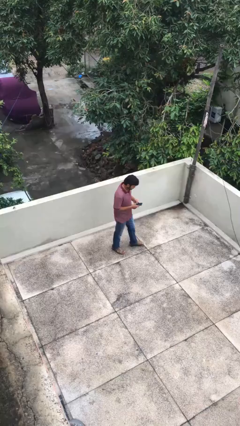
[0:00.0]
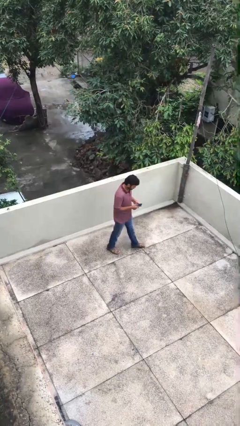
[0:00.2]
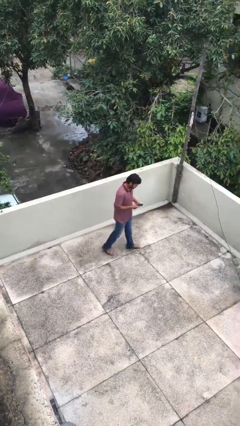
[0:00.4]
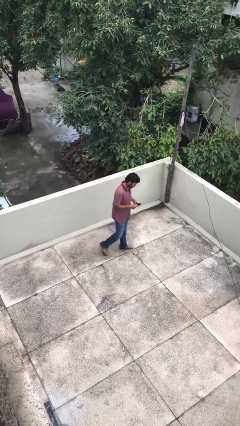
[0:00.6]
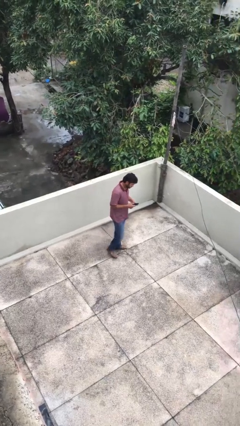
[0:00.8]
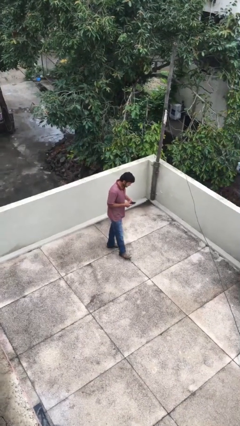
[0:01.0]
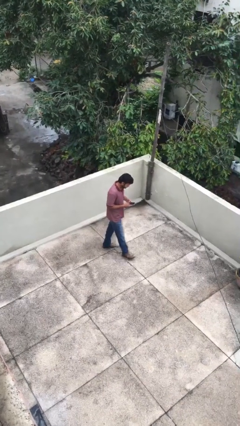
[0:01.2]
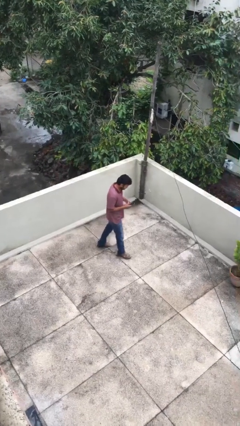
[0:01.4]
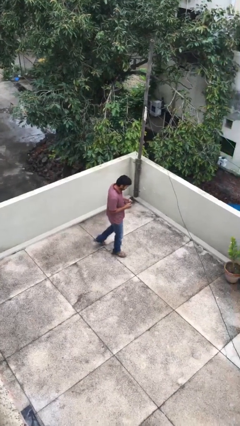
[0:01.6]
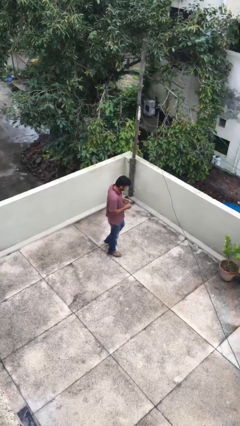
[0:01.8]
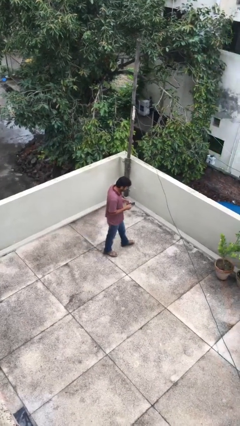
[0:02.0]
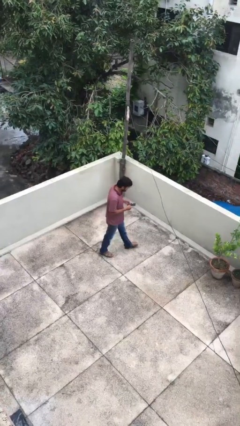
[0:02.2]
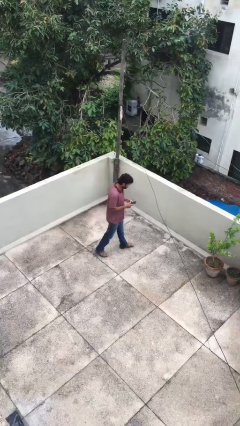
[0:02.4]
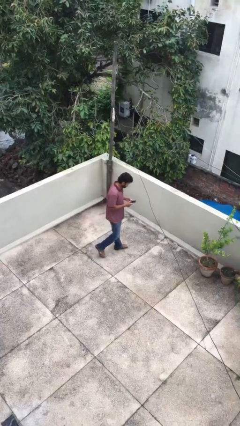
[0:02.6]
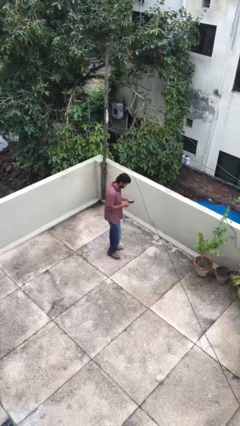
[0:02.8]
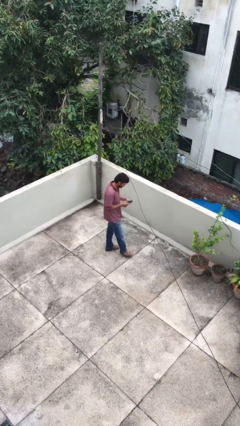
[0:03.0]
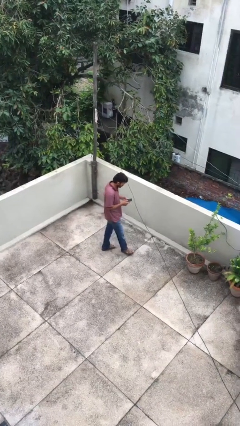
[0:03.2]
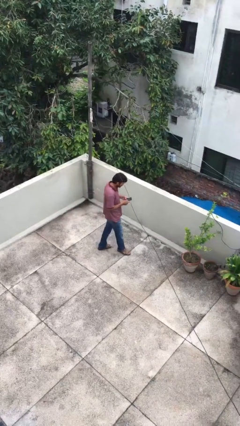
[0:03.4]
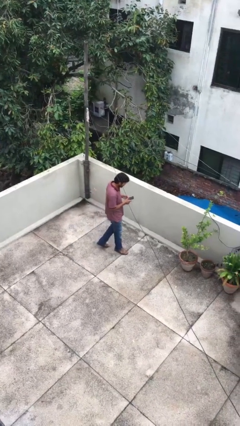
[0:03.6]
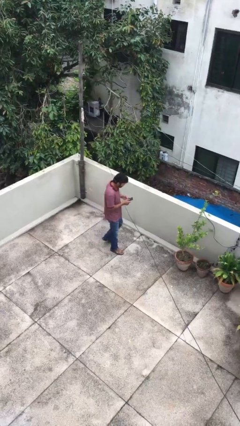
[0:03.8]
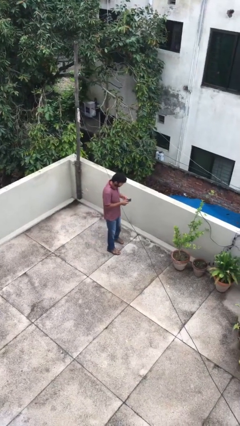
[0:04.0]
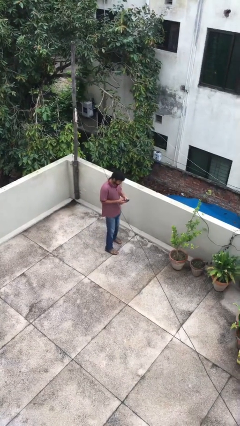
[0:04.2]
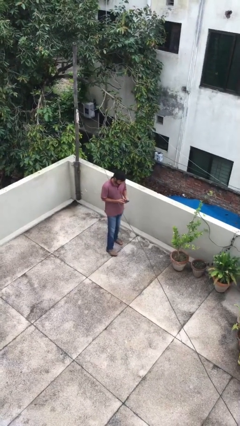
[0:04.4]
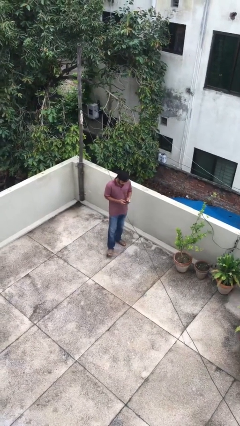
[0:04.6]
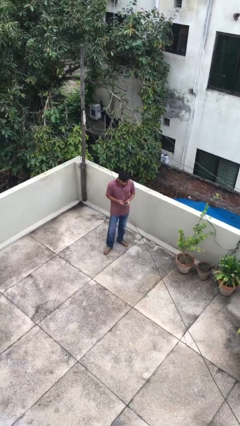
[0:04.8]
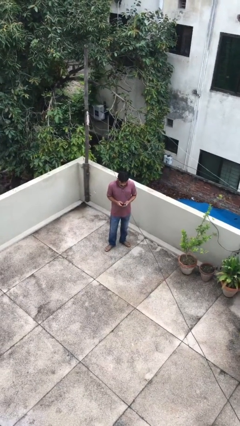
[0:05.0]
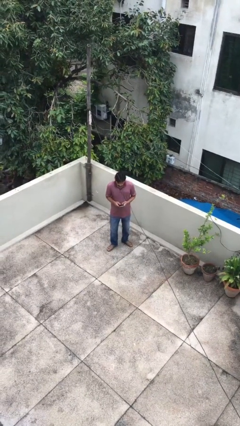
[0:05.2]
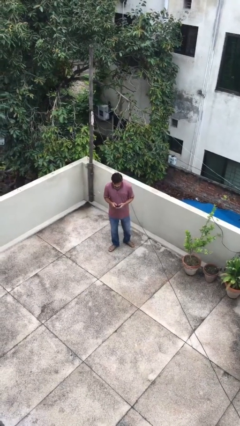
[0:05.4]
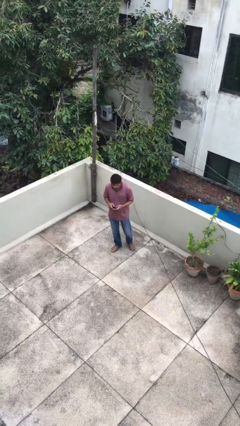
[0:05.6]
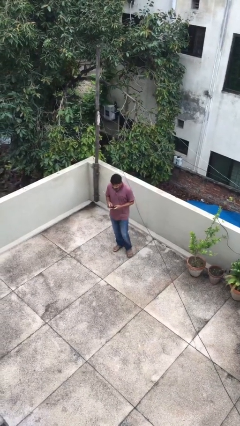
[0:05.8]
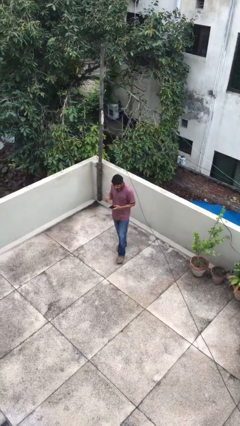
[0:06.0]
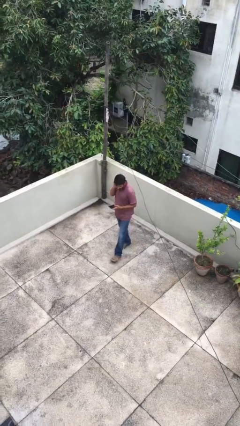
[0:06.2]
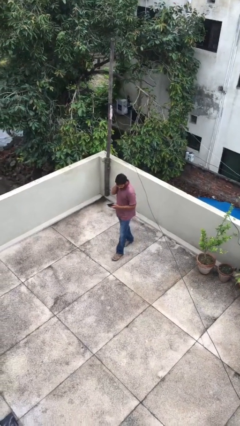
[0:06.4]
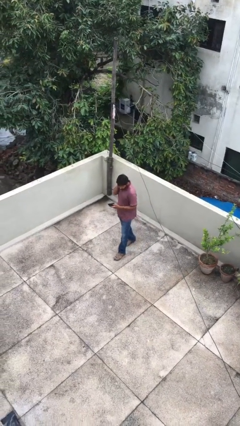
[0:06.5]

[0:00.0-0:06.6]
person texts on phone

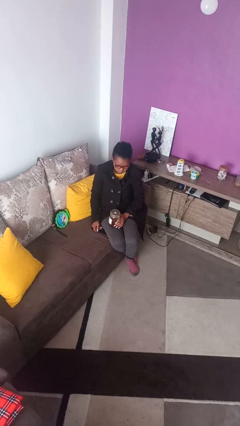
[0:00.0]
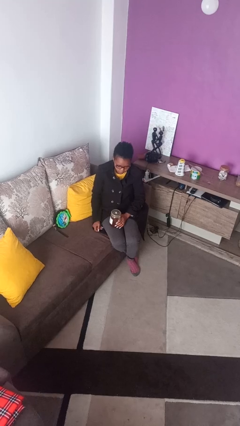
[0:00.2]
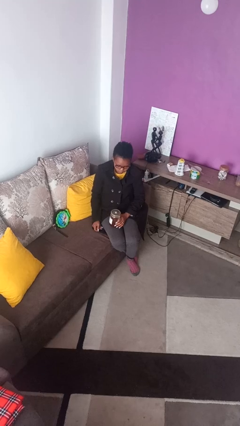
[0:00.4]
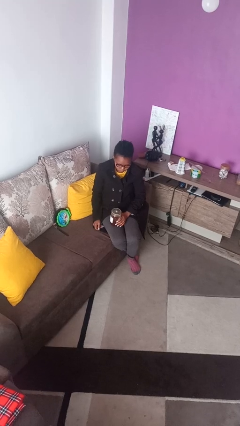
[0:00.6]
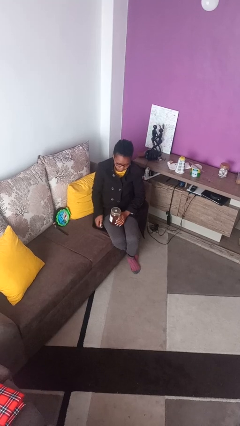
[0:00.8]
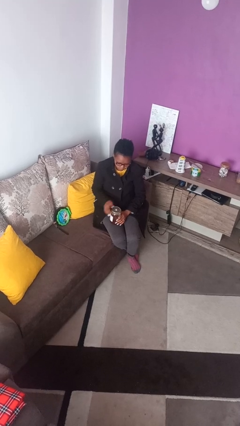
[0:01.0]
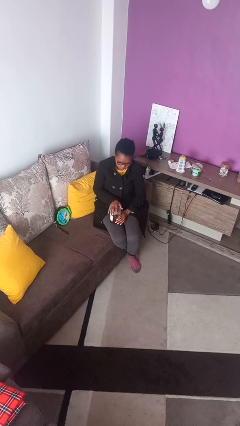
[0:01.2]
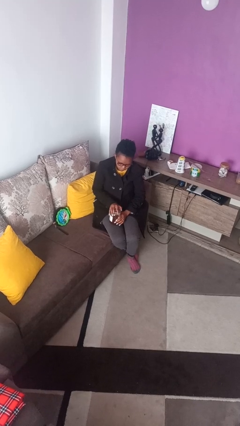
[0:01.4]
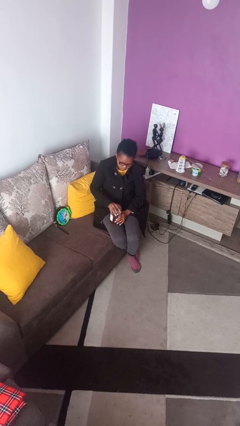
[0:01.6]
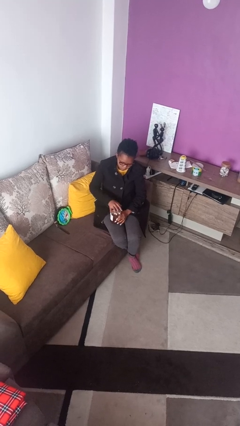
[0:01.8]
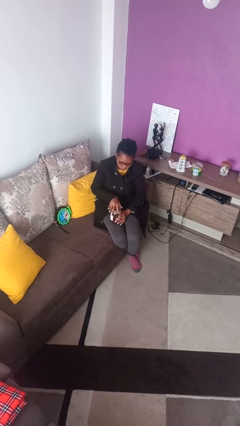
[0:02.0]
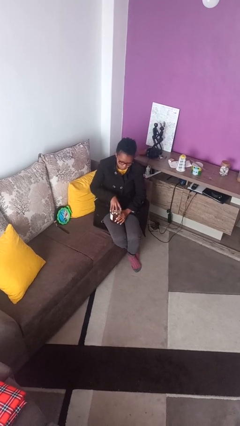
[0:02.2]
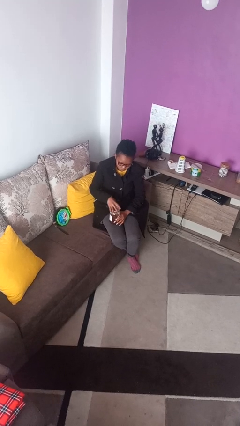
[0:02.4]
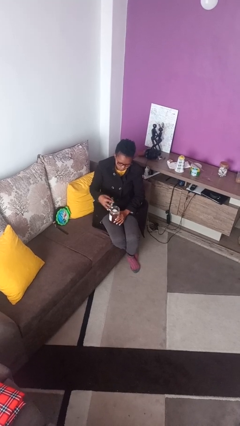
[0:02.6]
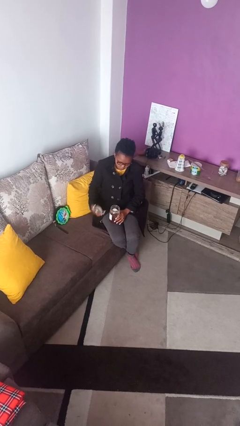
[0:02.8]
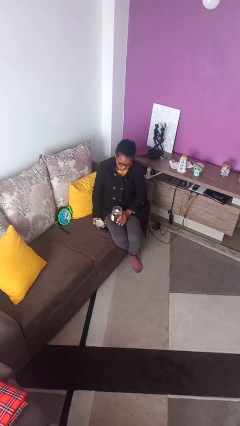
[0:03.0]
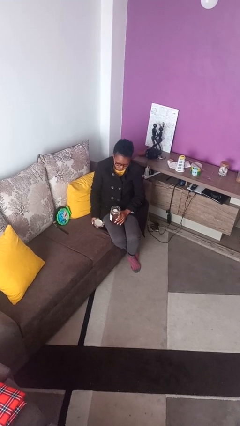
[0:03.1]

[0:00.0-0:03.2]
person opens jar

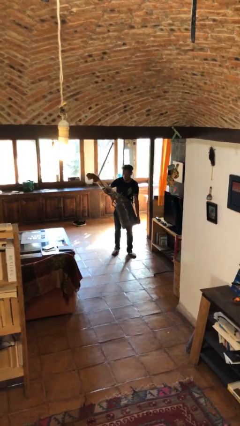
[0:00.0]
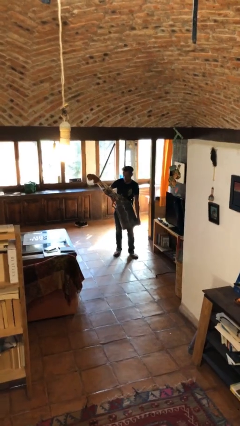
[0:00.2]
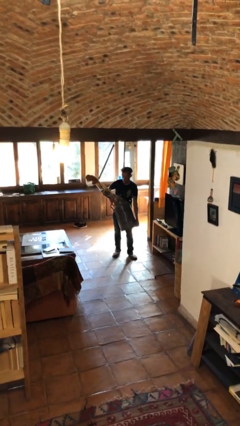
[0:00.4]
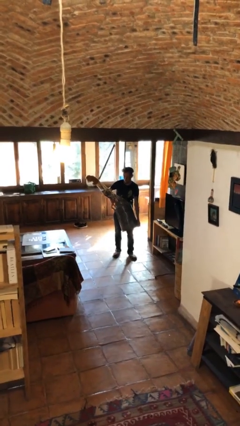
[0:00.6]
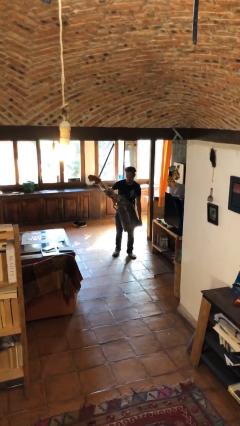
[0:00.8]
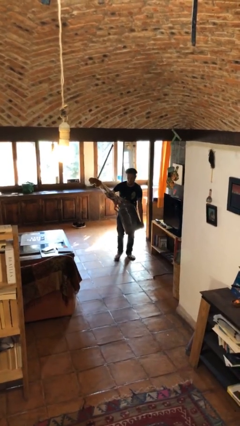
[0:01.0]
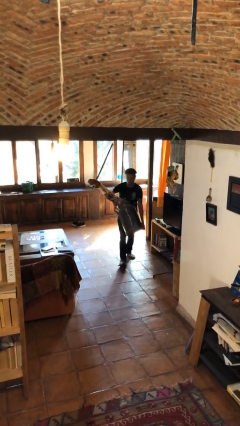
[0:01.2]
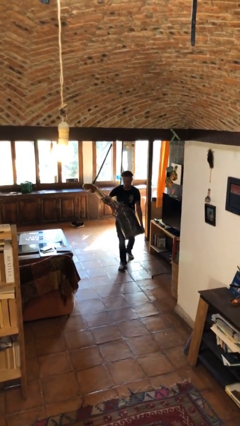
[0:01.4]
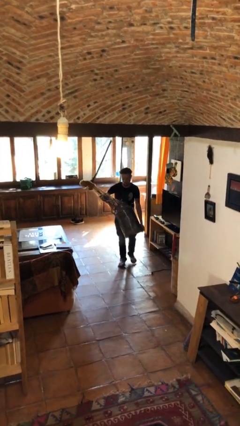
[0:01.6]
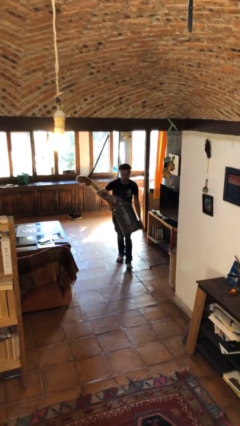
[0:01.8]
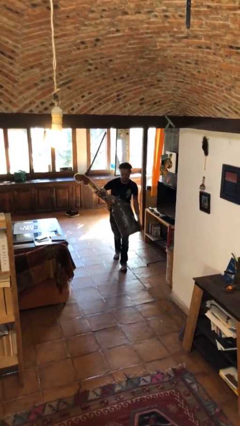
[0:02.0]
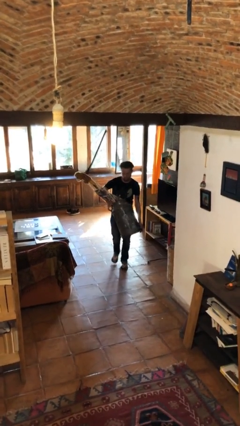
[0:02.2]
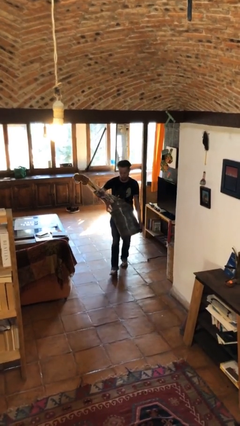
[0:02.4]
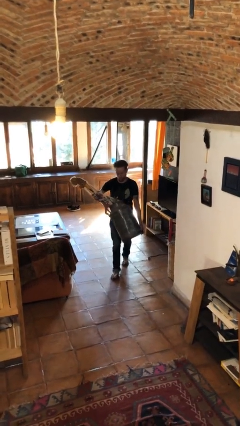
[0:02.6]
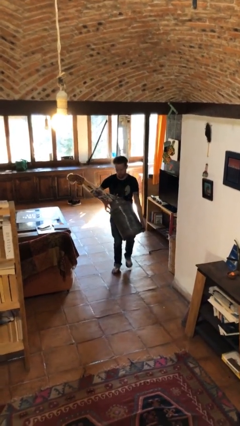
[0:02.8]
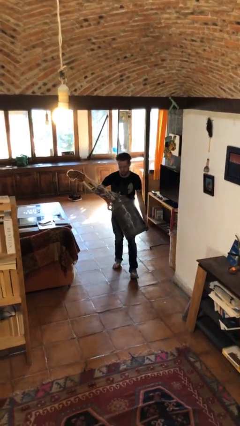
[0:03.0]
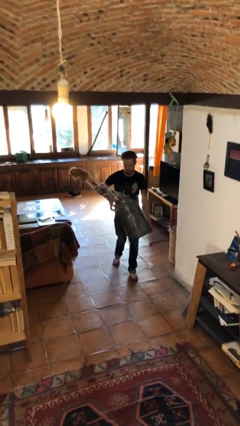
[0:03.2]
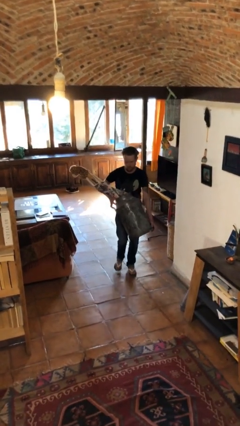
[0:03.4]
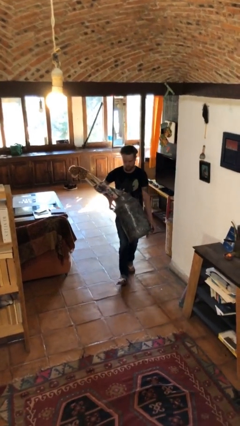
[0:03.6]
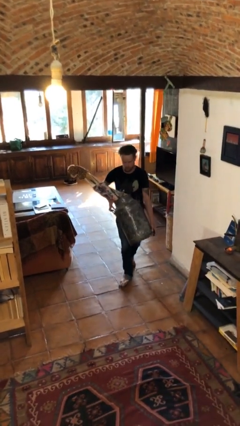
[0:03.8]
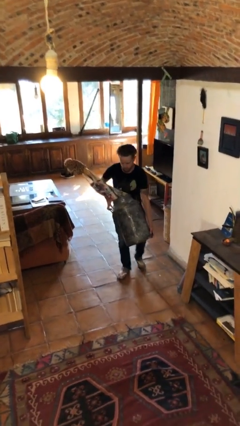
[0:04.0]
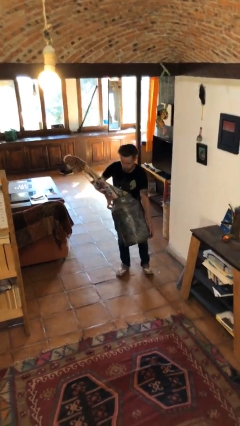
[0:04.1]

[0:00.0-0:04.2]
person carries heavy object

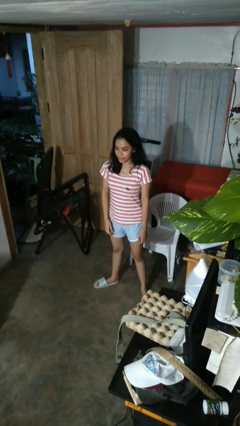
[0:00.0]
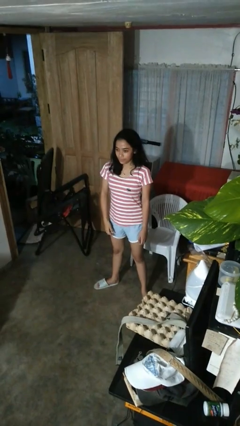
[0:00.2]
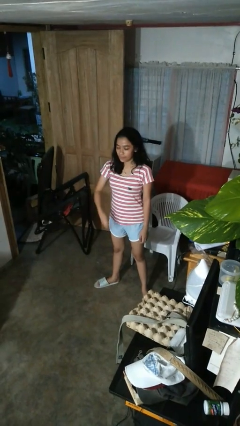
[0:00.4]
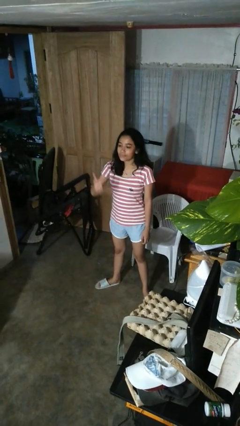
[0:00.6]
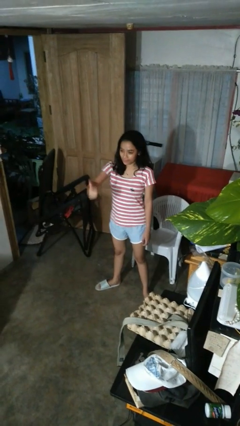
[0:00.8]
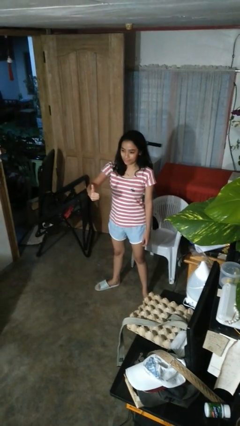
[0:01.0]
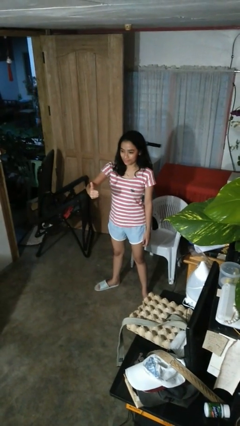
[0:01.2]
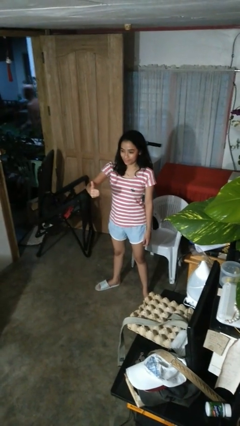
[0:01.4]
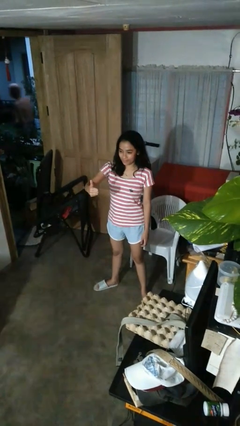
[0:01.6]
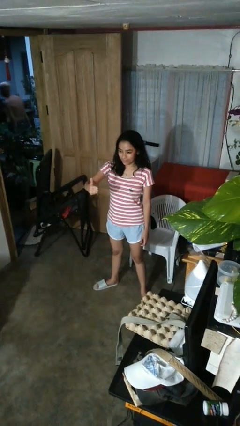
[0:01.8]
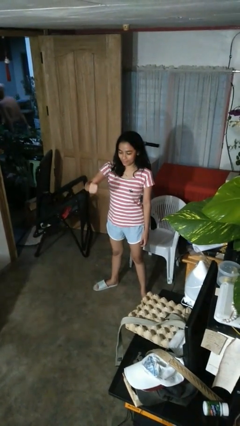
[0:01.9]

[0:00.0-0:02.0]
person gestures thumbs up

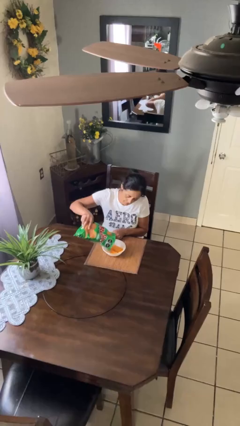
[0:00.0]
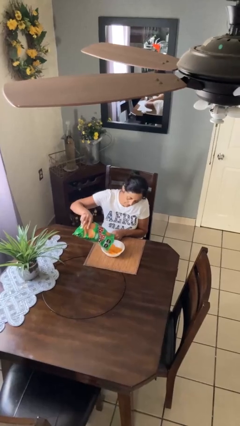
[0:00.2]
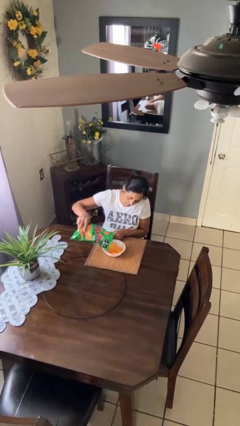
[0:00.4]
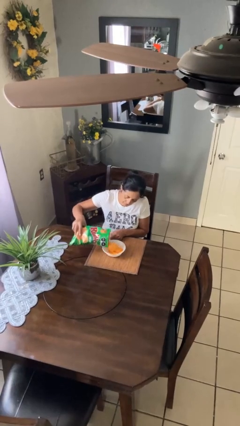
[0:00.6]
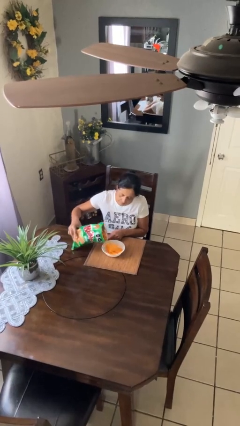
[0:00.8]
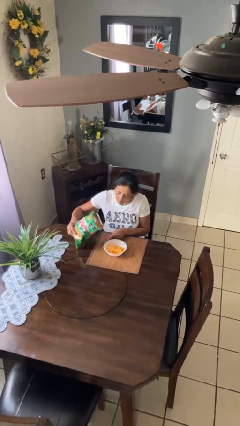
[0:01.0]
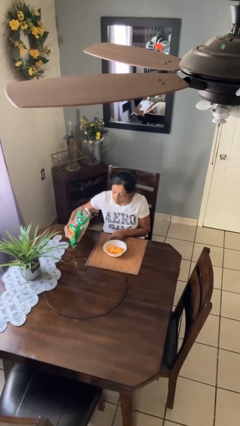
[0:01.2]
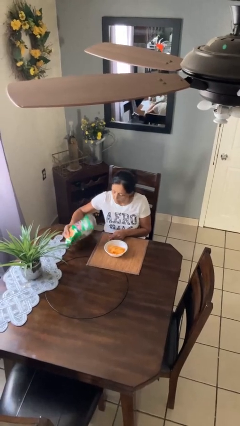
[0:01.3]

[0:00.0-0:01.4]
person pours into bowl

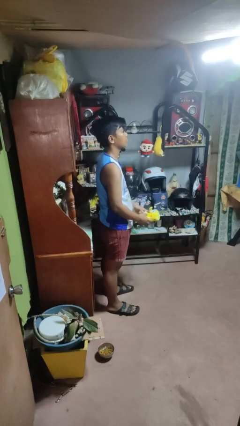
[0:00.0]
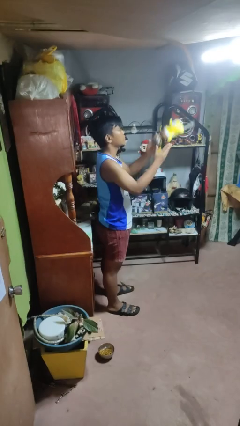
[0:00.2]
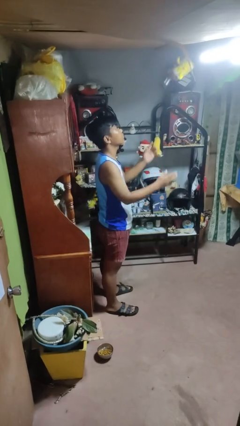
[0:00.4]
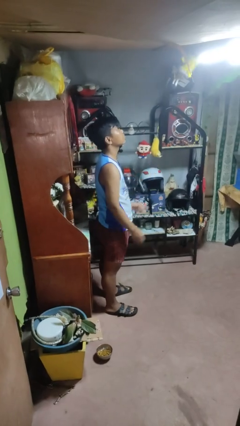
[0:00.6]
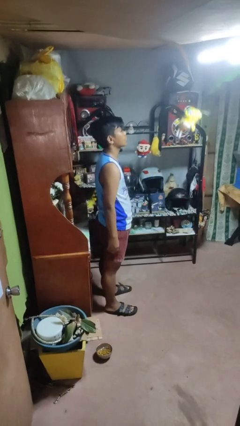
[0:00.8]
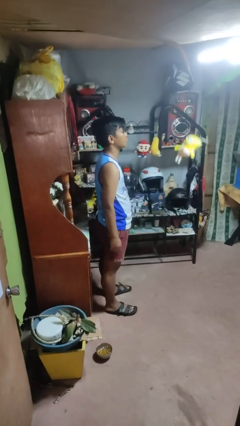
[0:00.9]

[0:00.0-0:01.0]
person throws object into air
